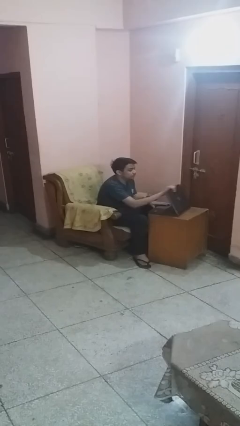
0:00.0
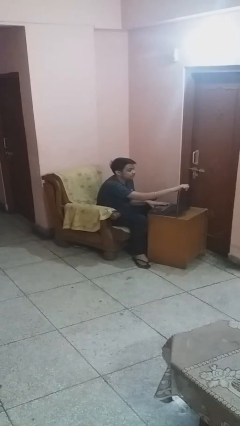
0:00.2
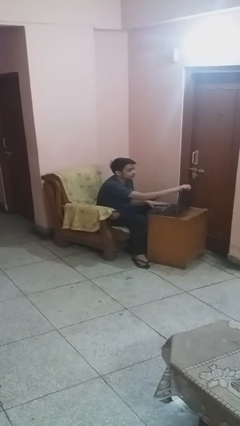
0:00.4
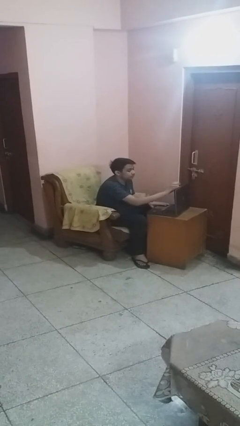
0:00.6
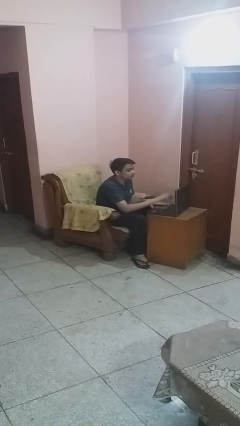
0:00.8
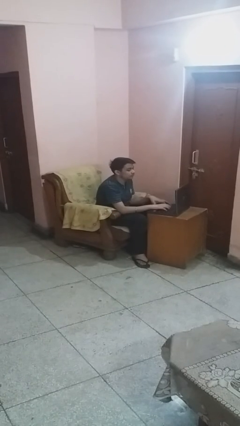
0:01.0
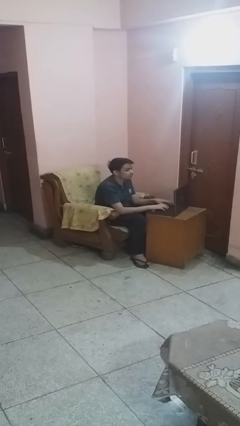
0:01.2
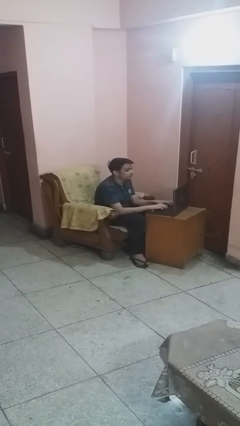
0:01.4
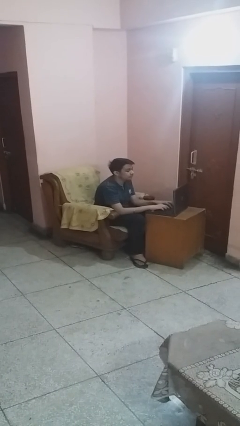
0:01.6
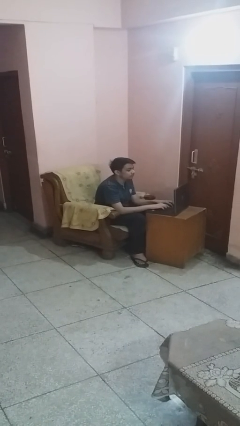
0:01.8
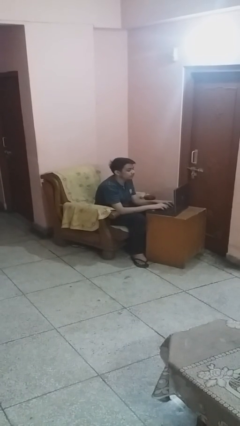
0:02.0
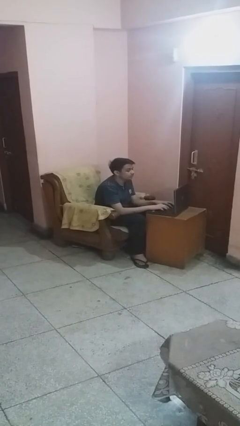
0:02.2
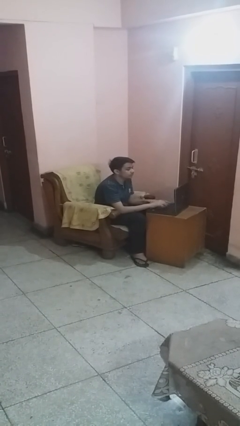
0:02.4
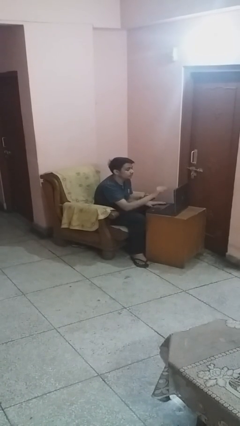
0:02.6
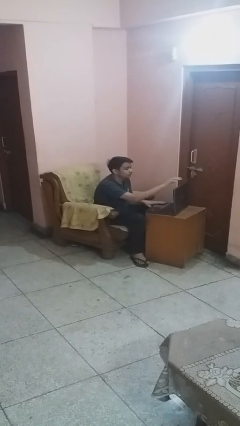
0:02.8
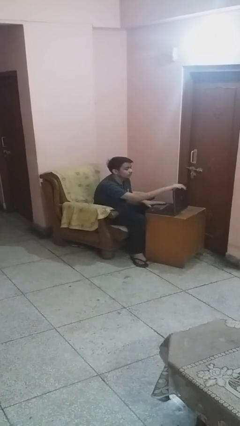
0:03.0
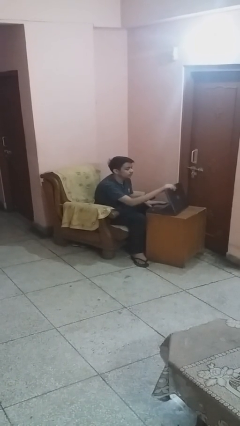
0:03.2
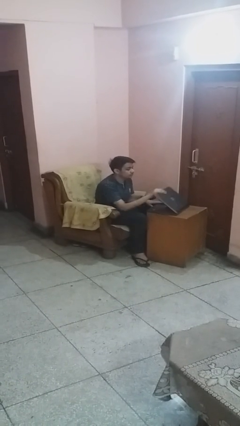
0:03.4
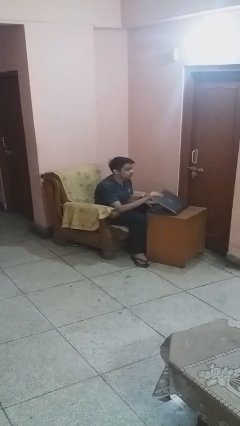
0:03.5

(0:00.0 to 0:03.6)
person interacts with laptop

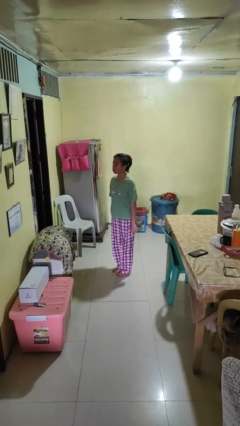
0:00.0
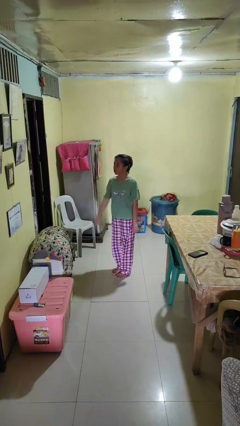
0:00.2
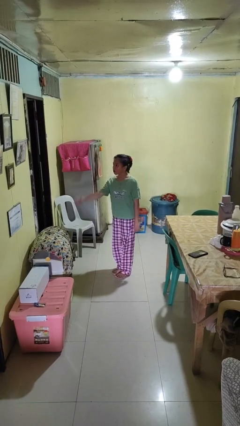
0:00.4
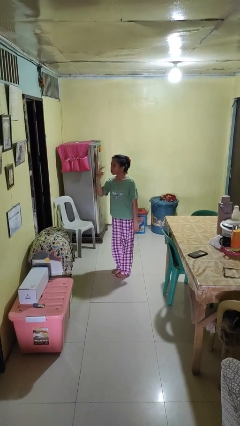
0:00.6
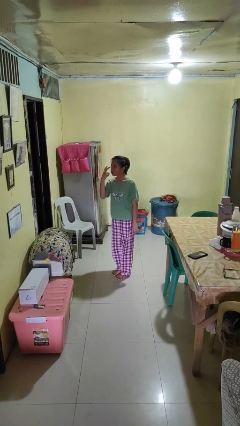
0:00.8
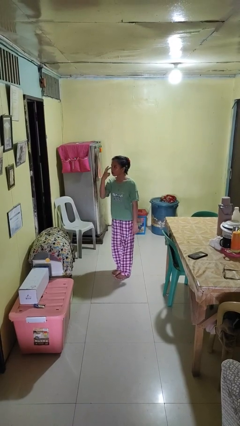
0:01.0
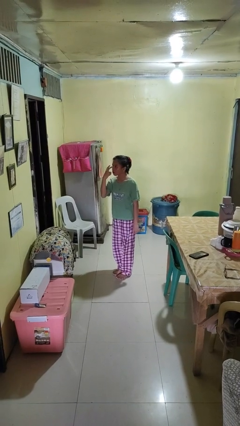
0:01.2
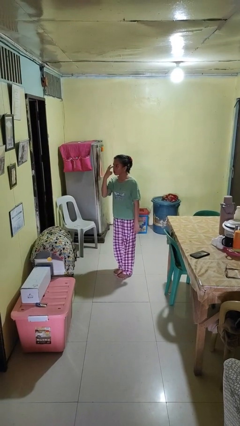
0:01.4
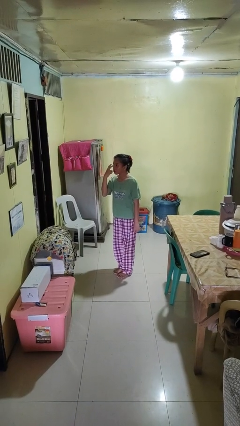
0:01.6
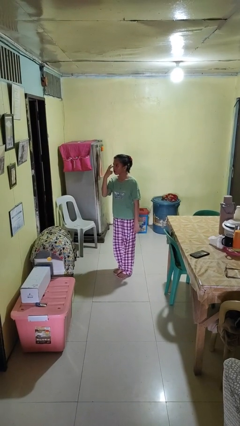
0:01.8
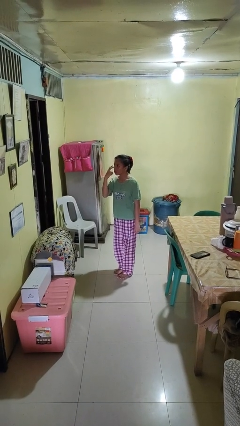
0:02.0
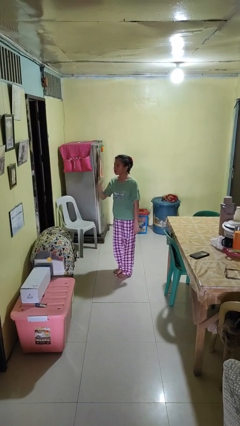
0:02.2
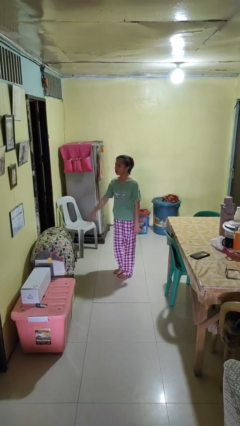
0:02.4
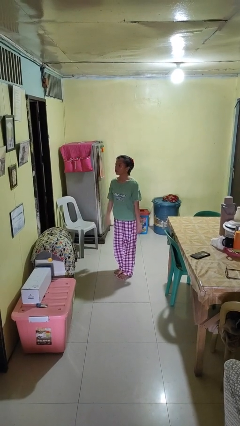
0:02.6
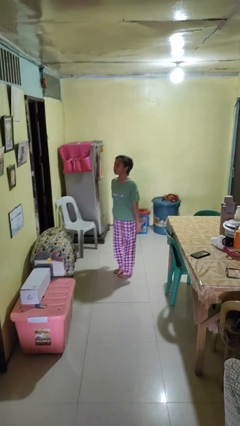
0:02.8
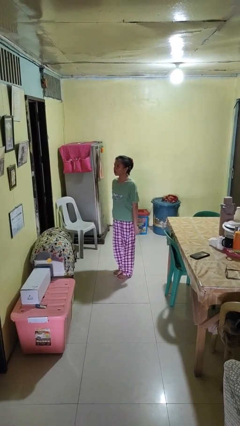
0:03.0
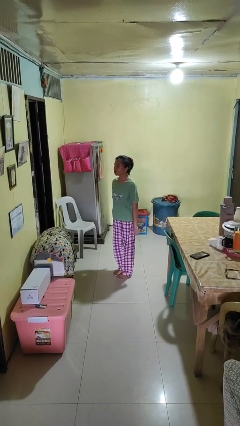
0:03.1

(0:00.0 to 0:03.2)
person gestures watch closely

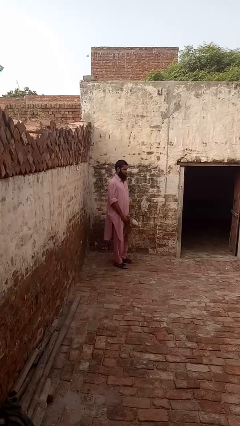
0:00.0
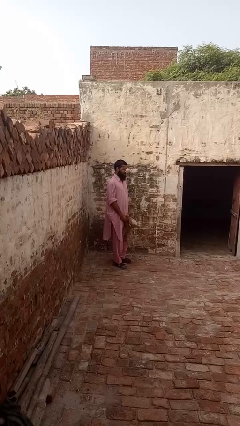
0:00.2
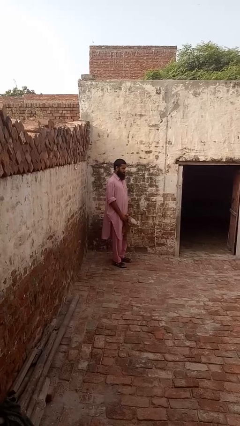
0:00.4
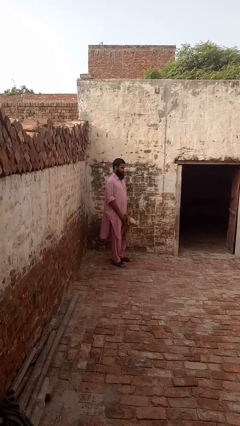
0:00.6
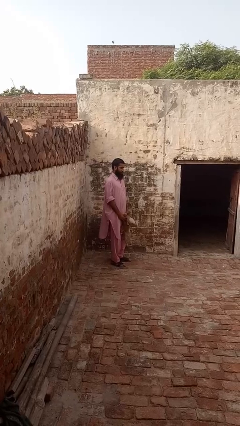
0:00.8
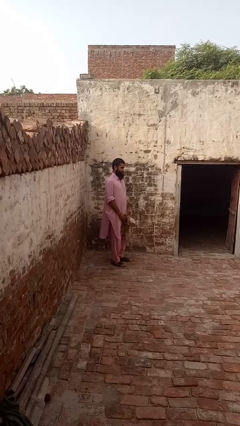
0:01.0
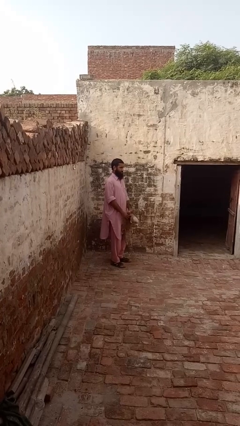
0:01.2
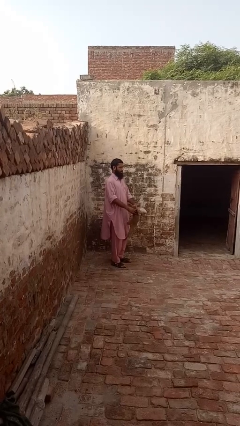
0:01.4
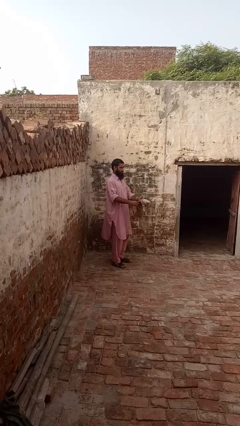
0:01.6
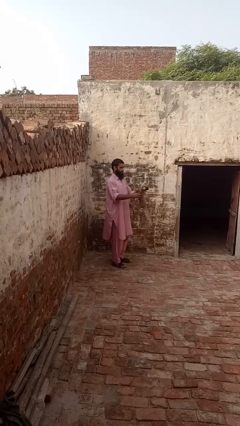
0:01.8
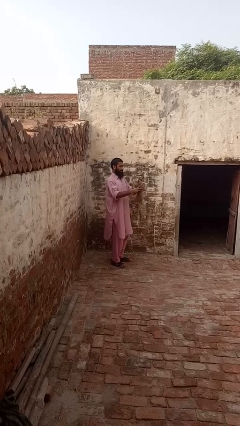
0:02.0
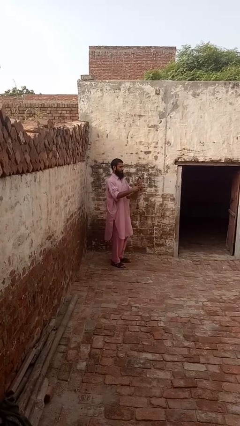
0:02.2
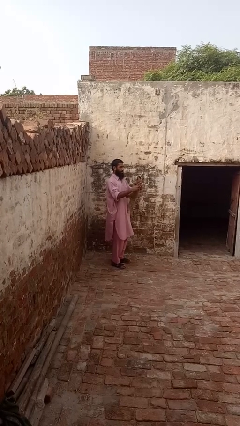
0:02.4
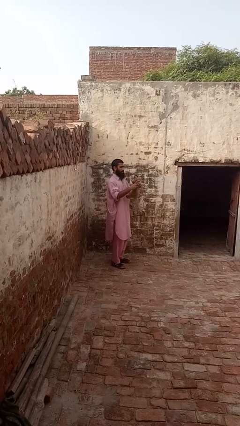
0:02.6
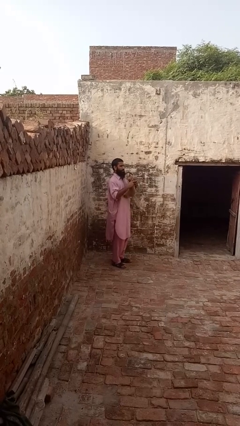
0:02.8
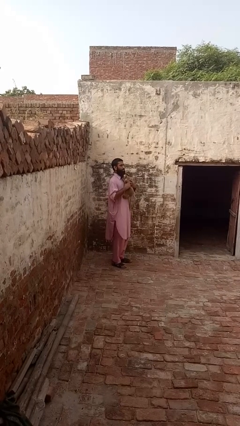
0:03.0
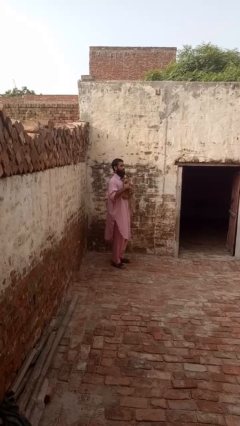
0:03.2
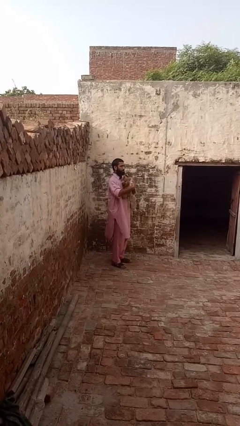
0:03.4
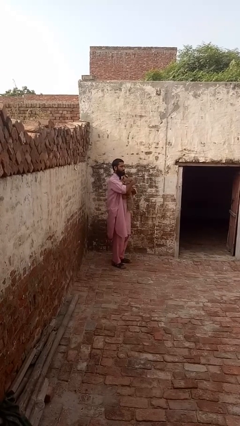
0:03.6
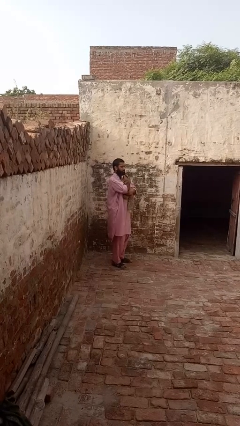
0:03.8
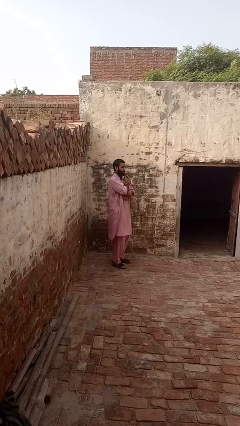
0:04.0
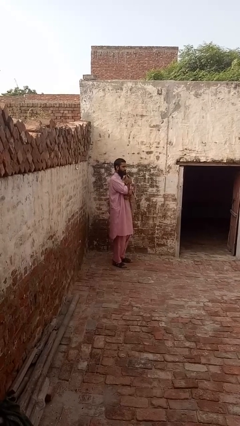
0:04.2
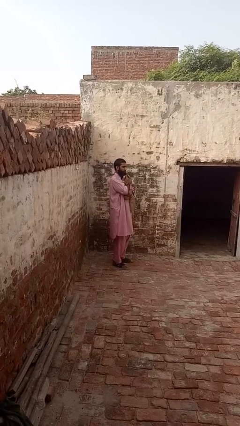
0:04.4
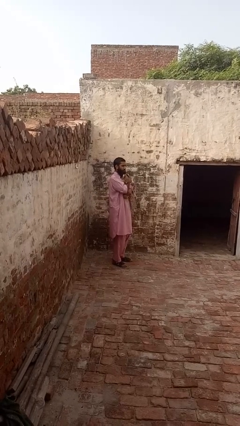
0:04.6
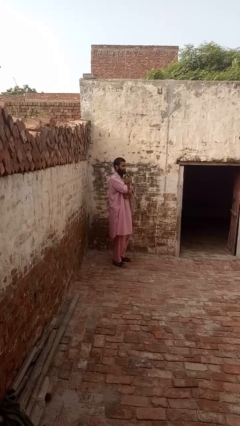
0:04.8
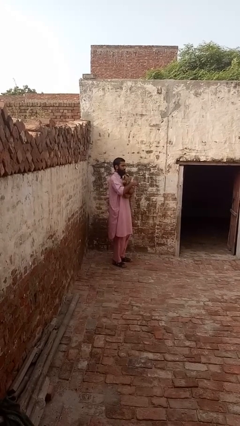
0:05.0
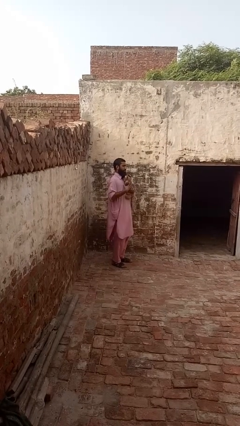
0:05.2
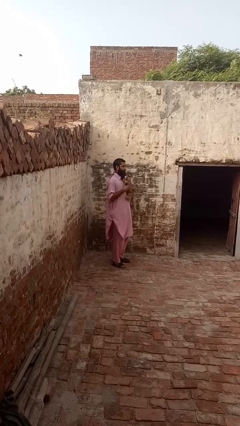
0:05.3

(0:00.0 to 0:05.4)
person hugs stuffed animal

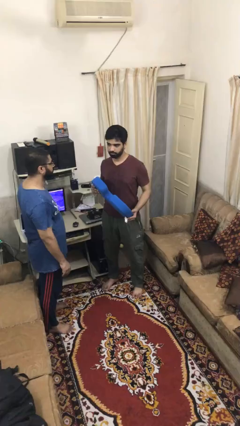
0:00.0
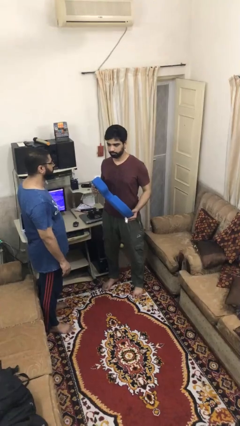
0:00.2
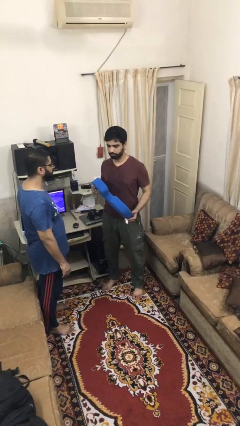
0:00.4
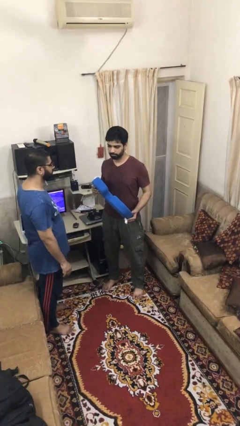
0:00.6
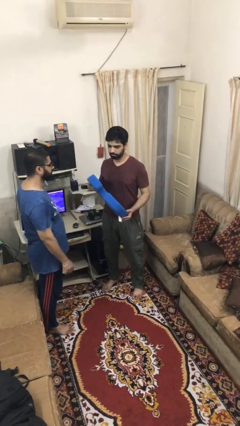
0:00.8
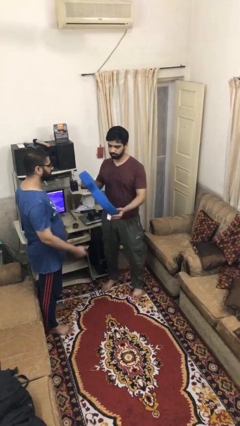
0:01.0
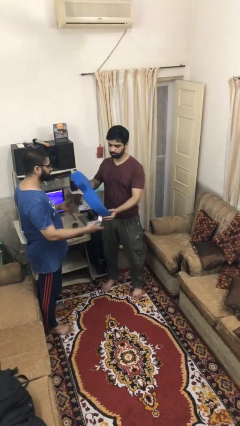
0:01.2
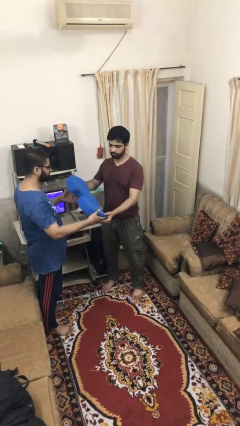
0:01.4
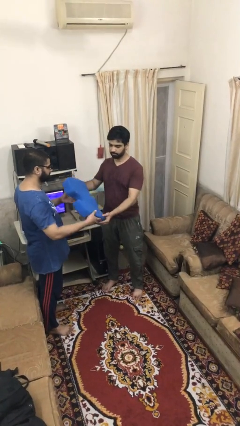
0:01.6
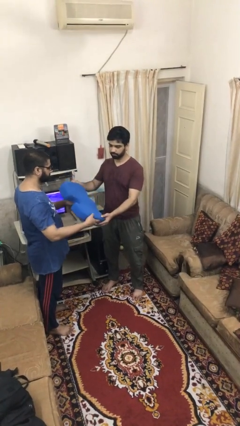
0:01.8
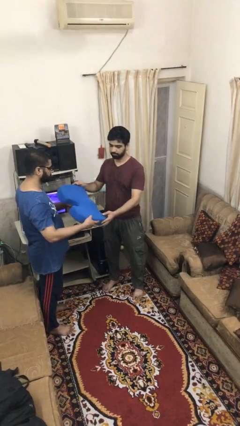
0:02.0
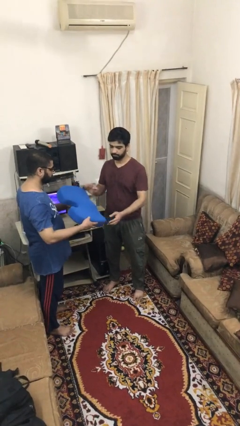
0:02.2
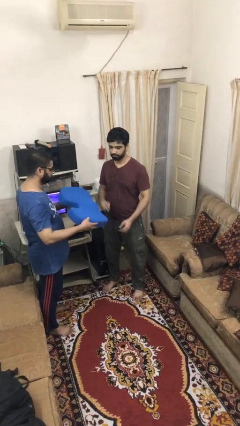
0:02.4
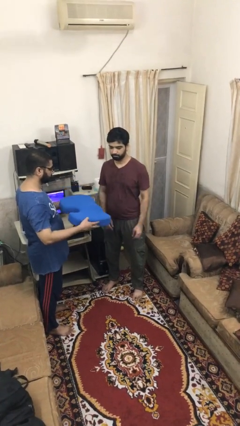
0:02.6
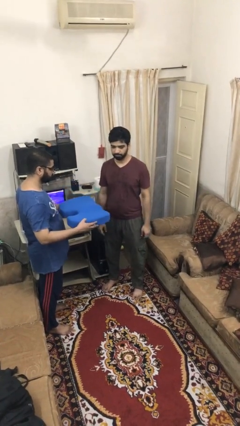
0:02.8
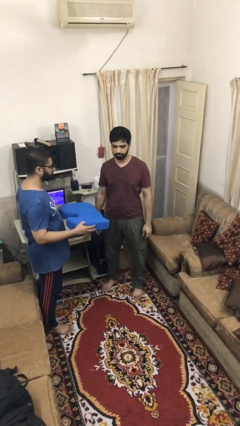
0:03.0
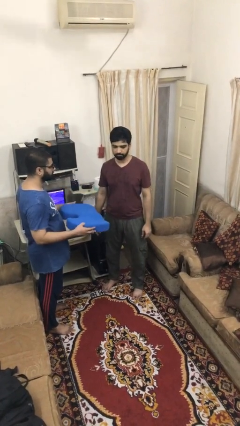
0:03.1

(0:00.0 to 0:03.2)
person transfers object to person

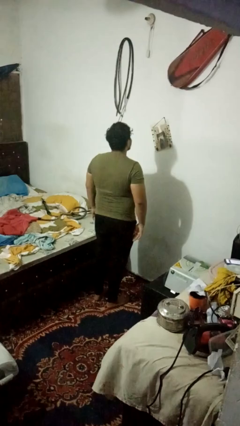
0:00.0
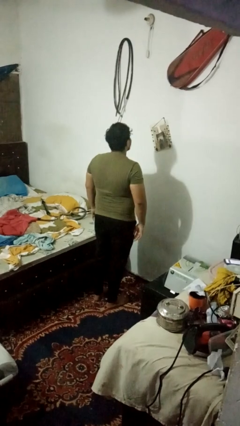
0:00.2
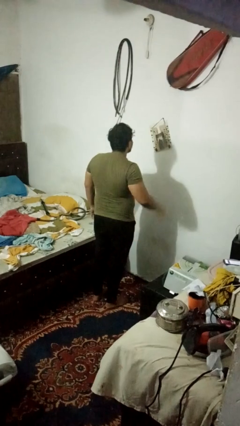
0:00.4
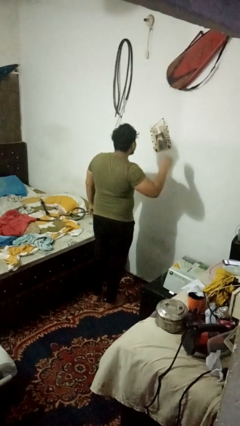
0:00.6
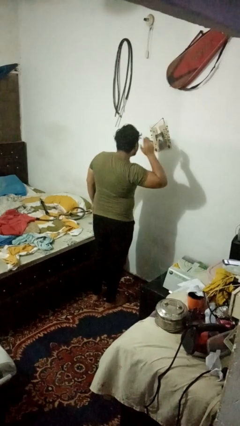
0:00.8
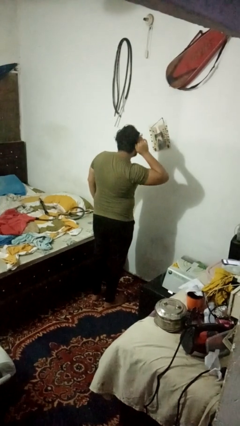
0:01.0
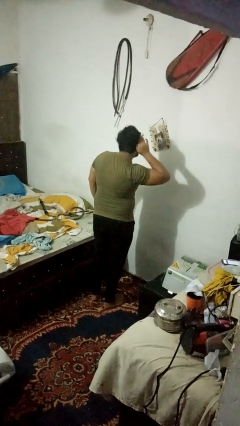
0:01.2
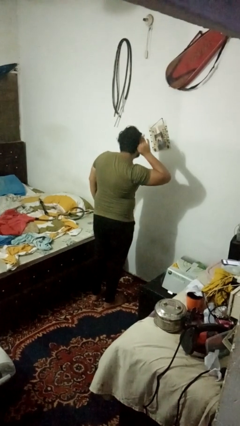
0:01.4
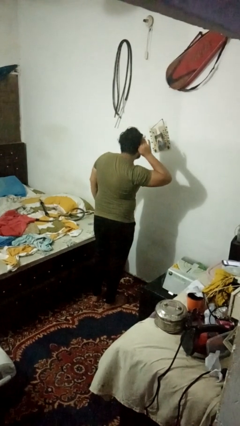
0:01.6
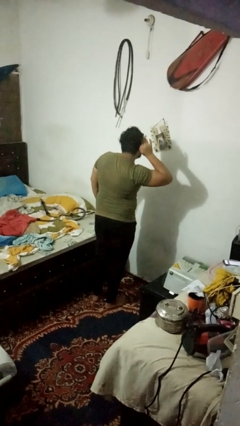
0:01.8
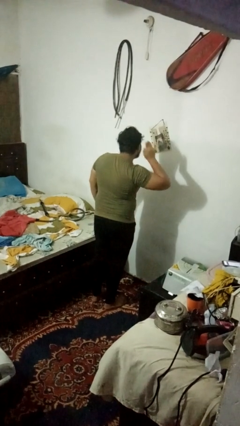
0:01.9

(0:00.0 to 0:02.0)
person gestures listen closely
